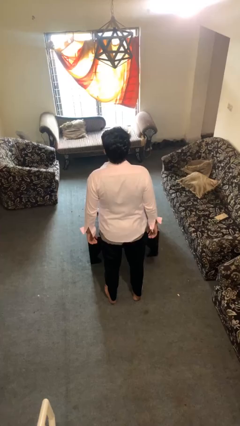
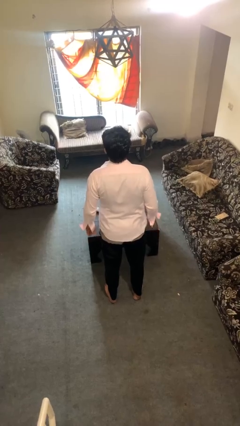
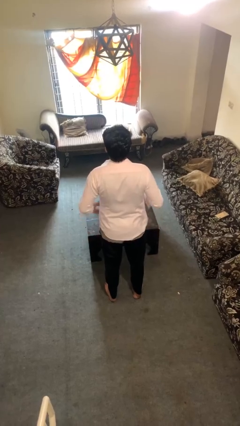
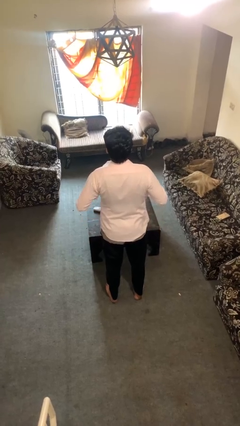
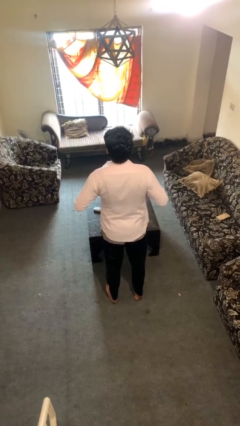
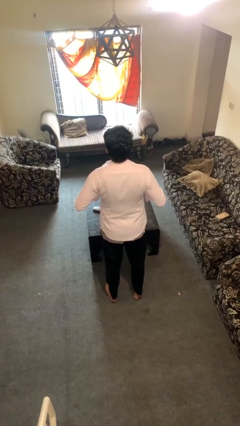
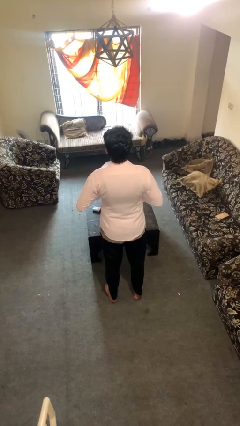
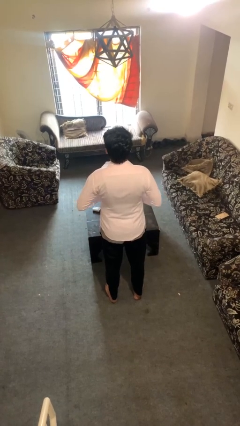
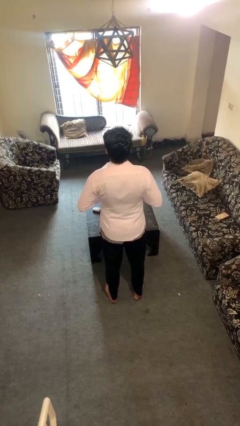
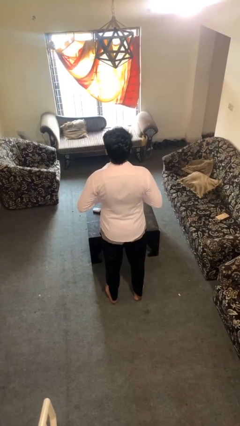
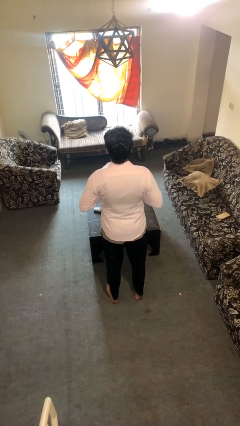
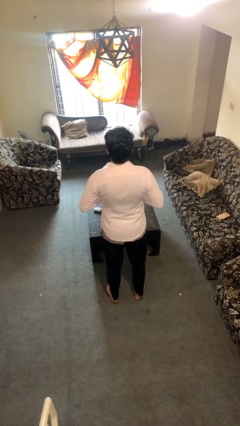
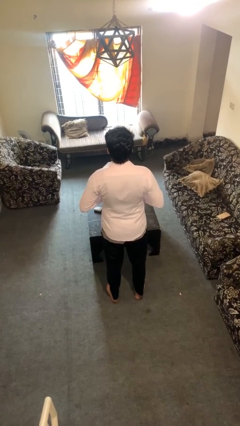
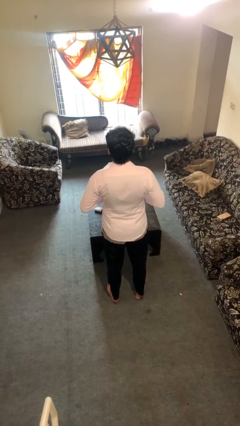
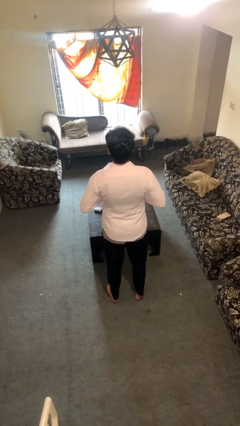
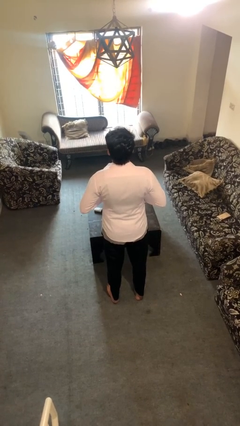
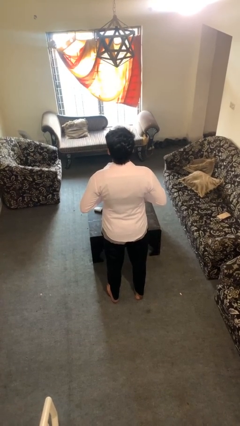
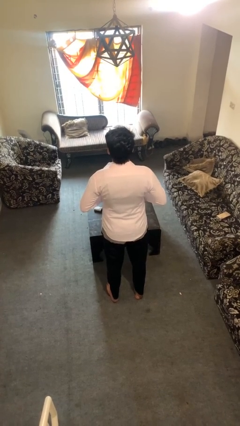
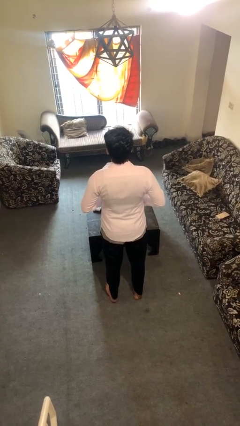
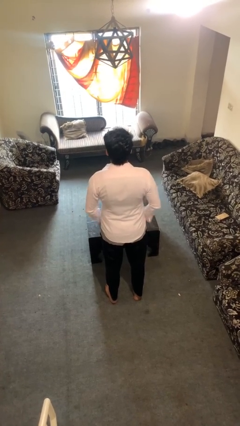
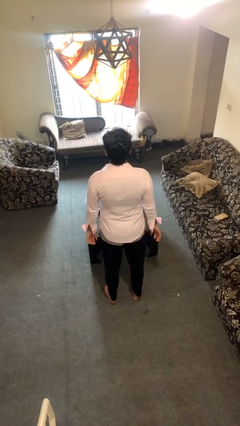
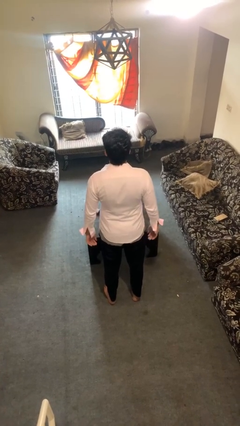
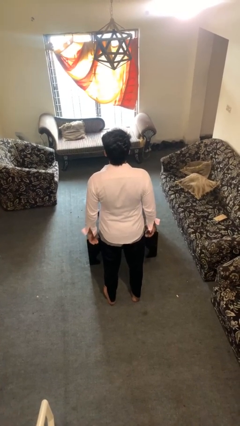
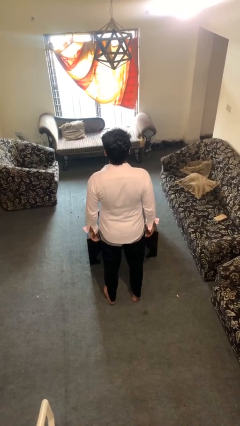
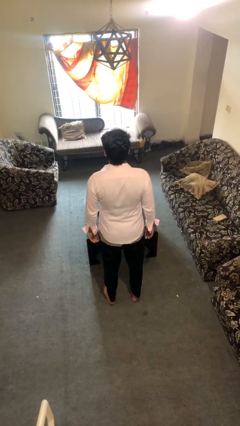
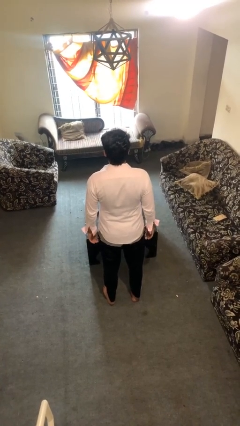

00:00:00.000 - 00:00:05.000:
person buttons shirt

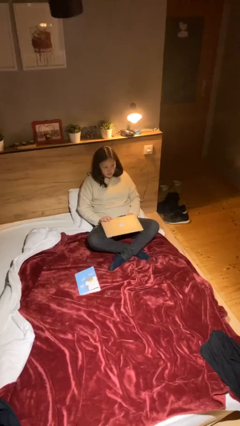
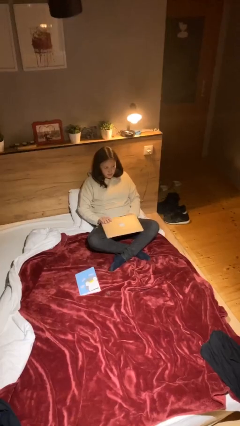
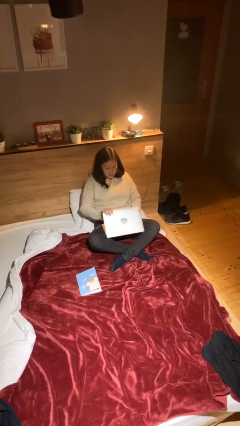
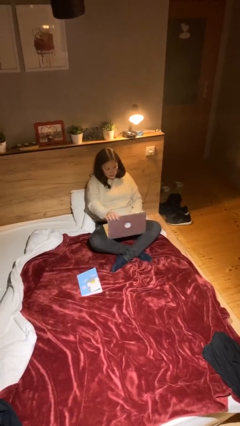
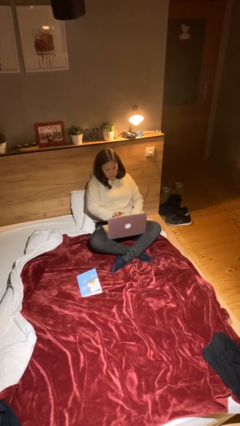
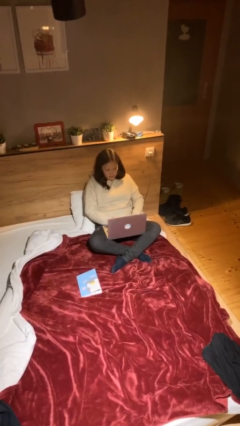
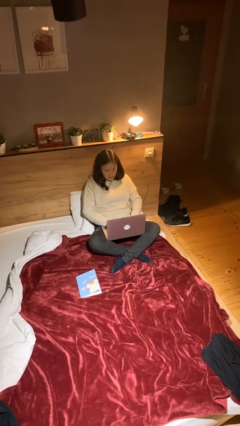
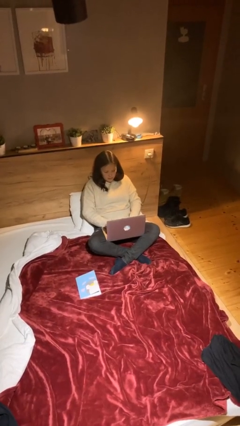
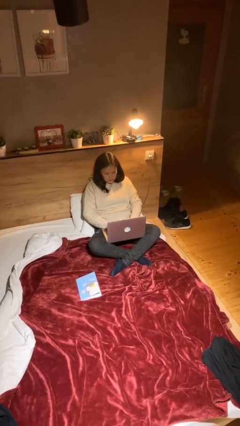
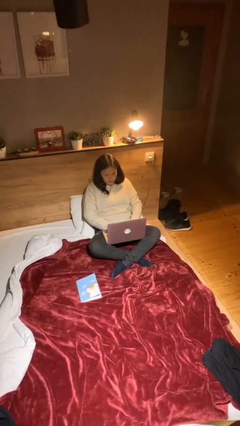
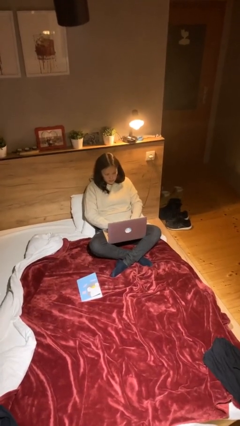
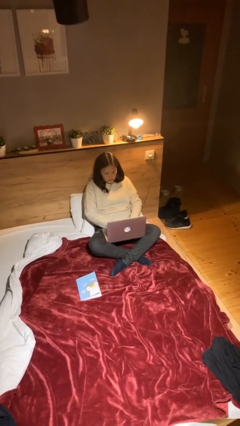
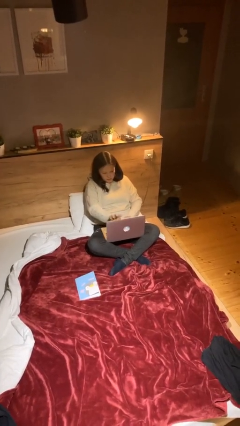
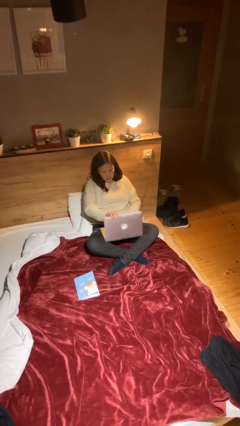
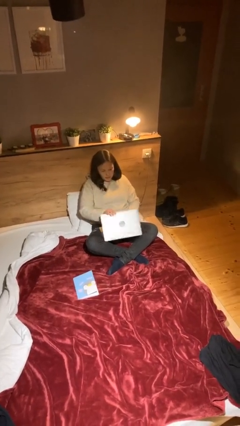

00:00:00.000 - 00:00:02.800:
person interacts with laptop

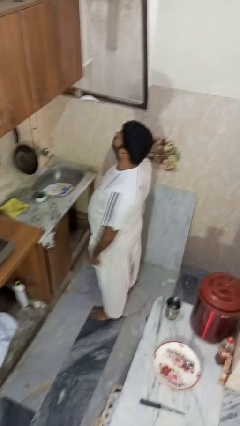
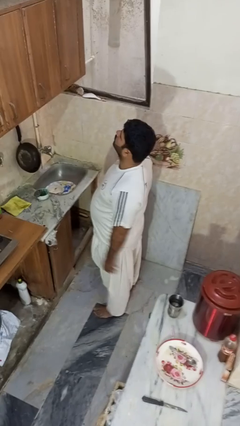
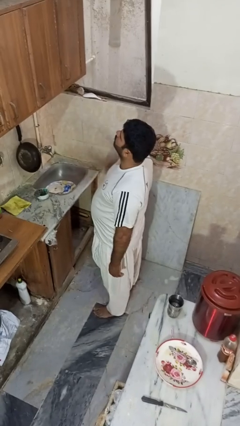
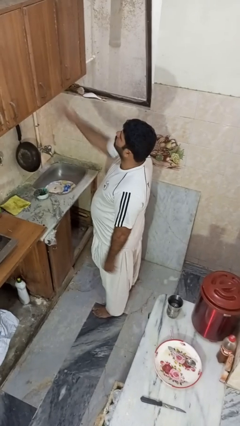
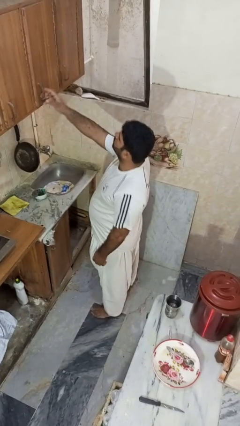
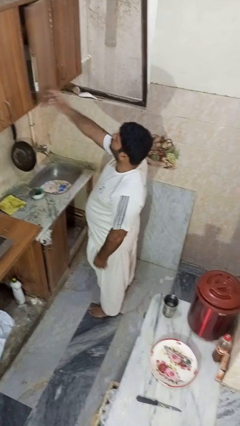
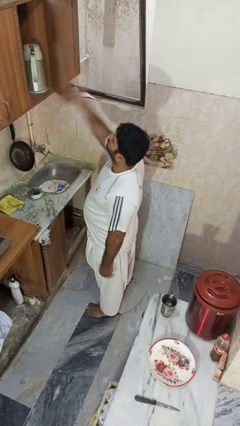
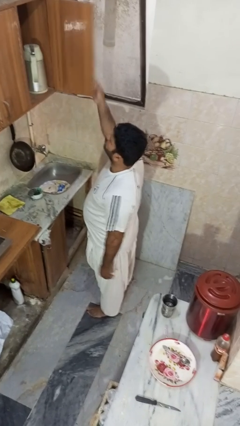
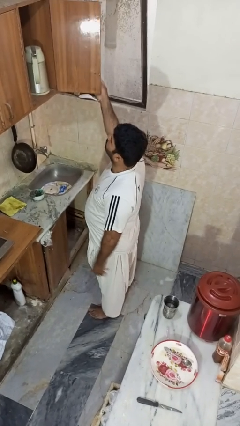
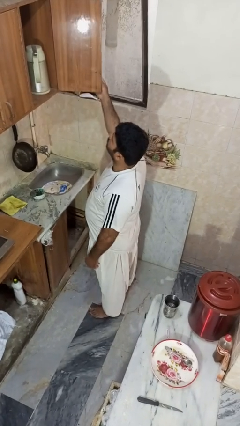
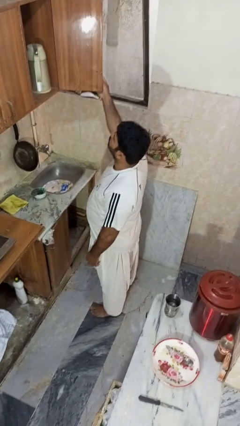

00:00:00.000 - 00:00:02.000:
person opens cabinet

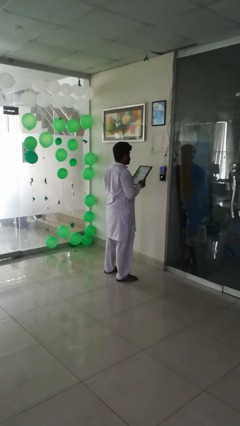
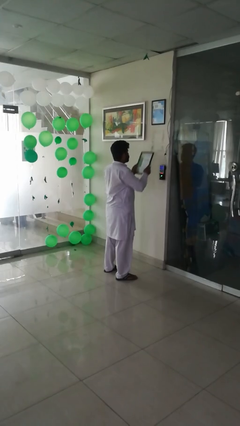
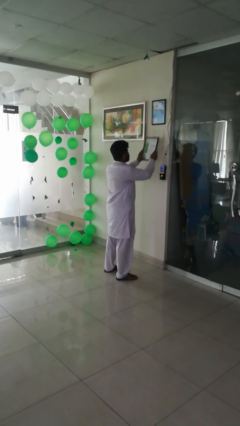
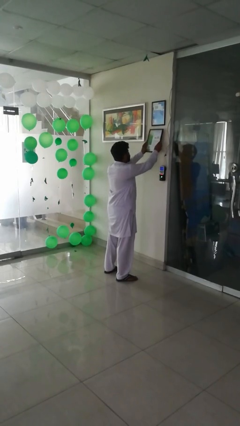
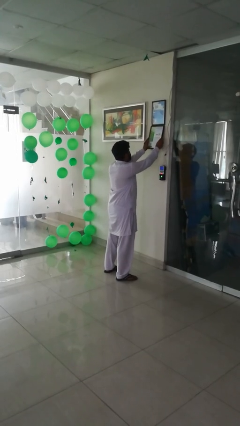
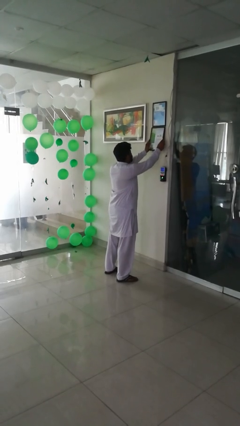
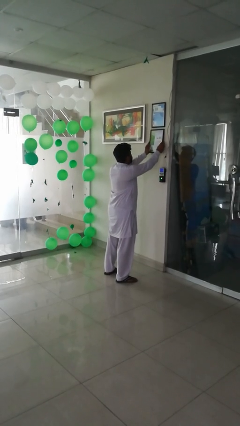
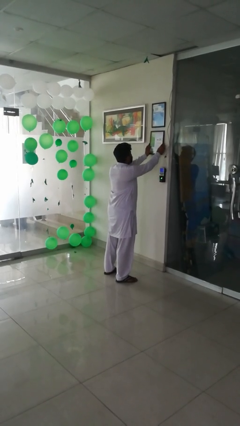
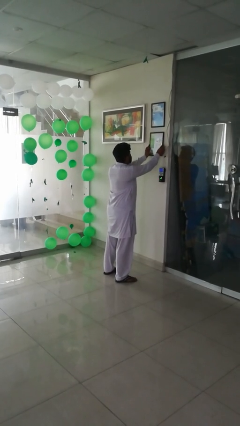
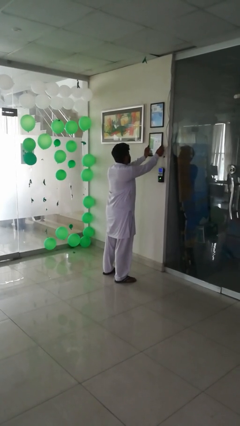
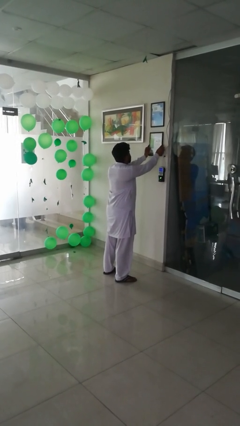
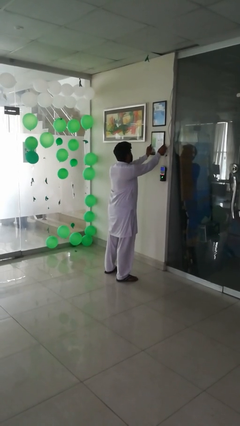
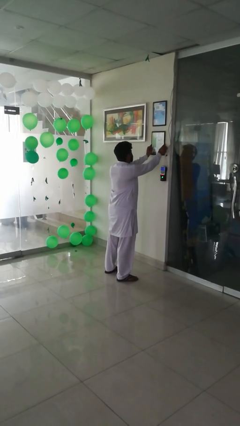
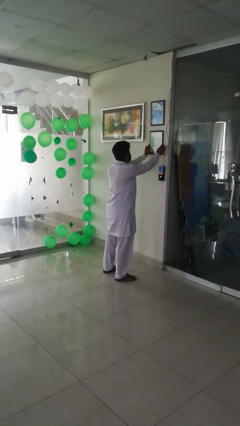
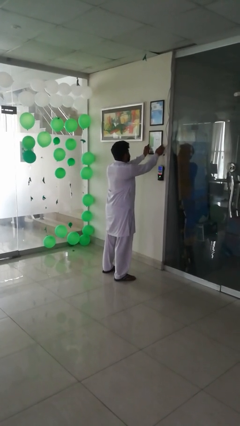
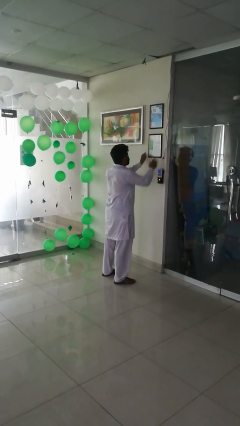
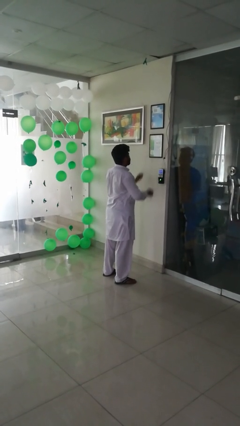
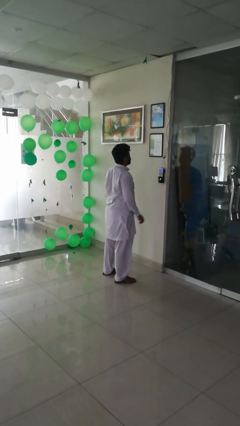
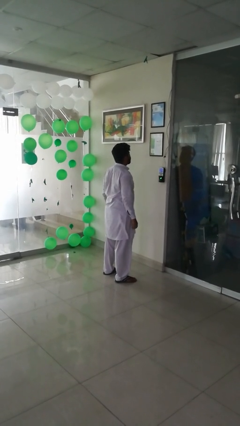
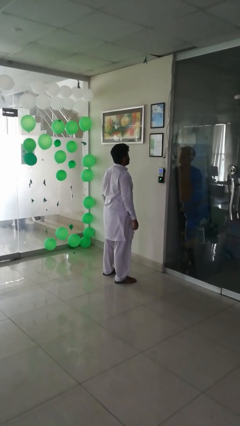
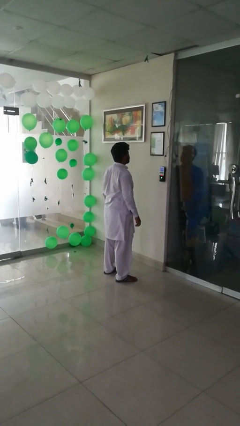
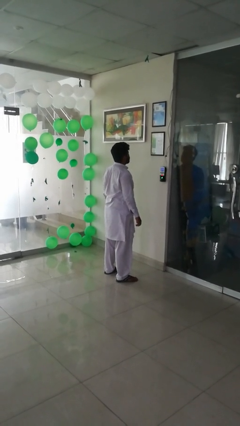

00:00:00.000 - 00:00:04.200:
person puts up smoke detector

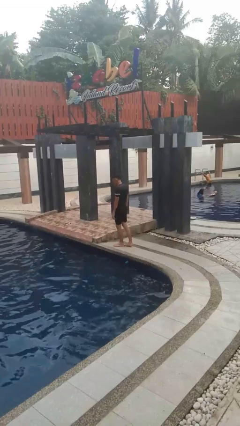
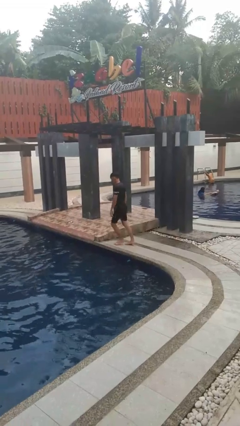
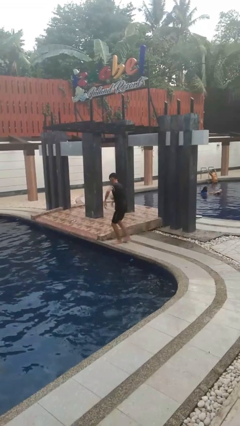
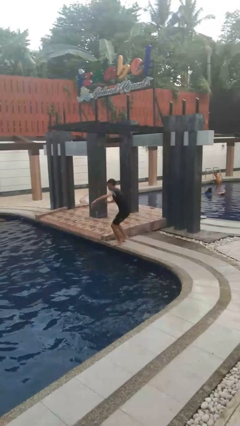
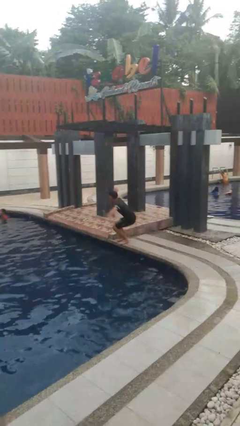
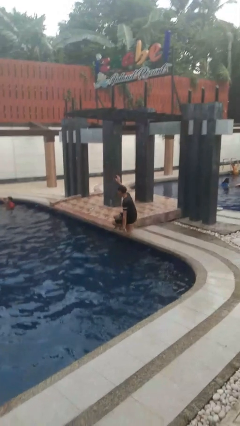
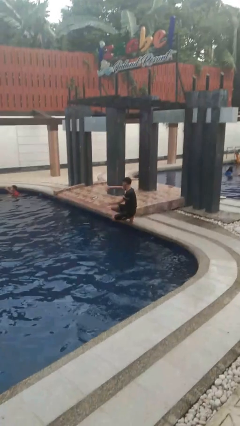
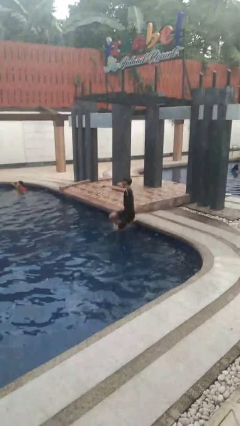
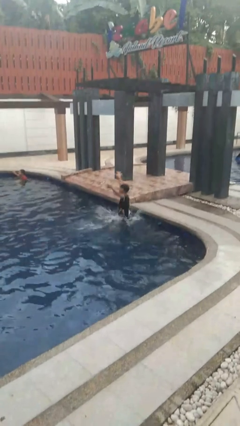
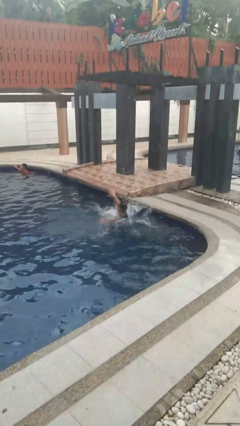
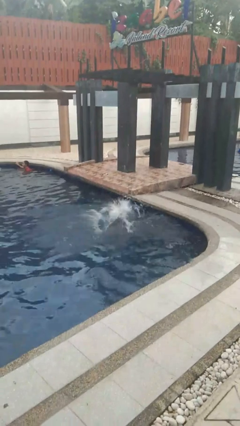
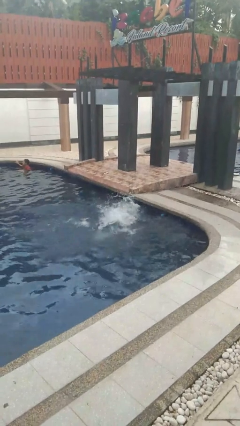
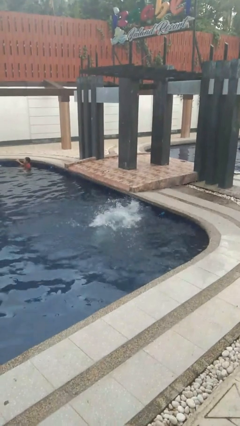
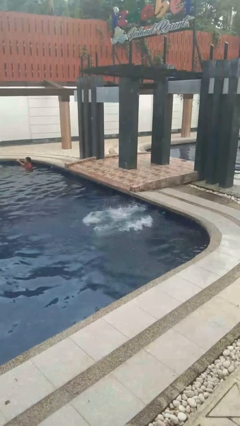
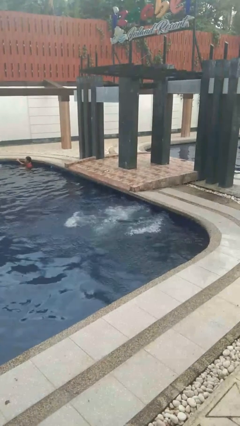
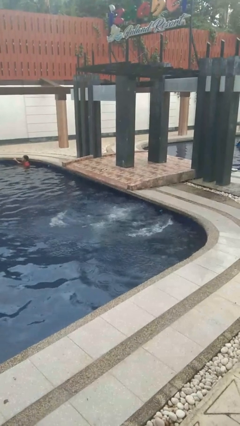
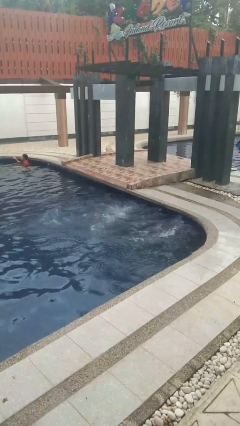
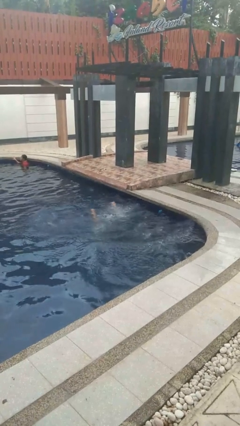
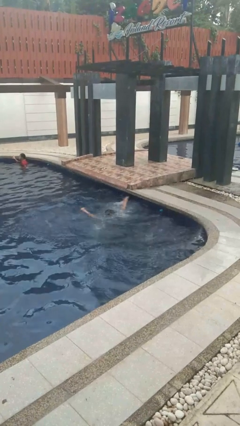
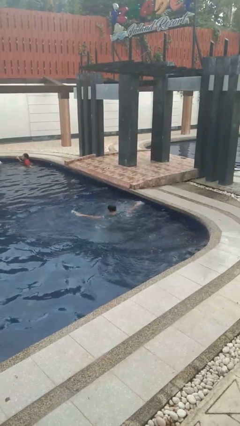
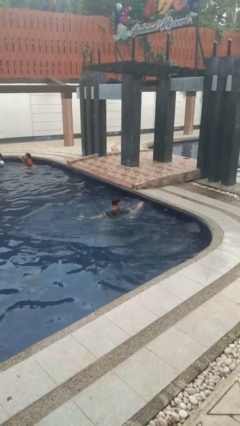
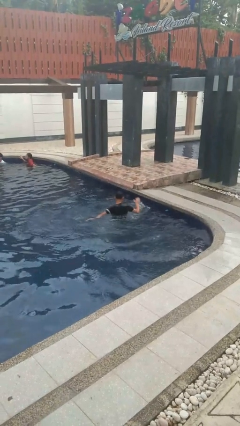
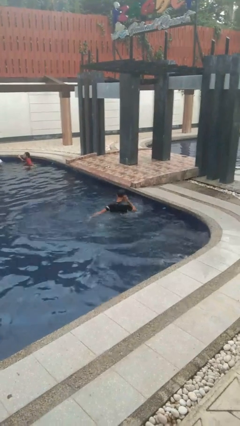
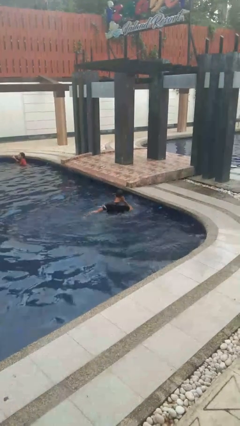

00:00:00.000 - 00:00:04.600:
person falls into pool
